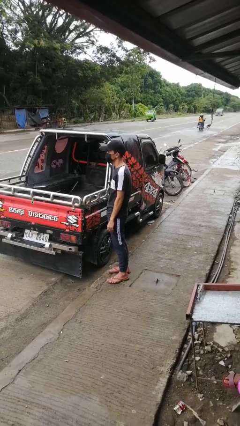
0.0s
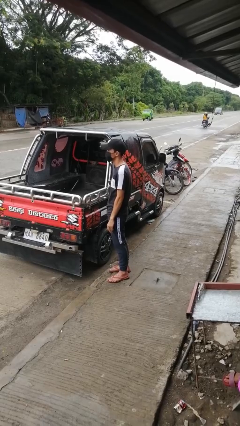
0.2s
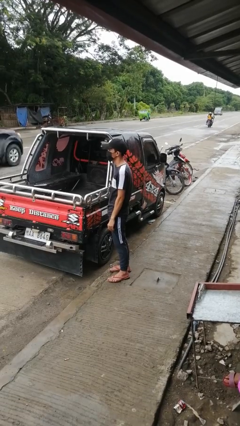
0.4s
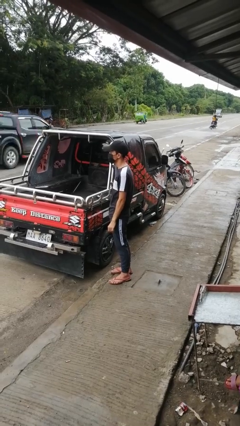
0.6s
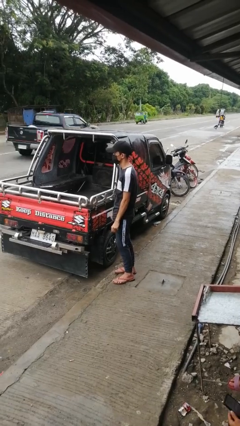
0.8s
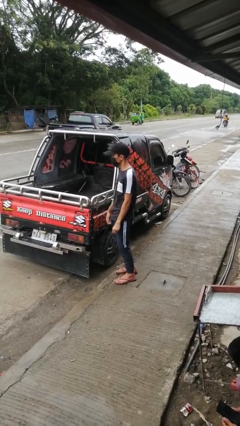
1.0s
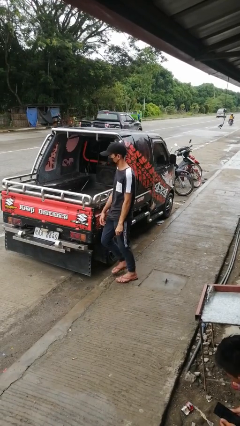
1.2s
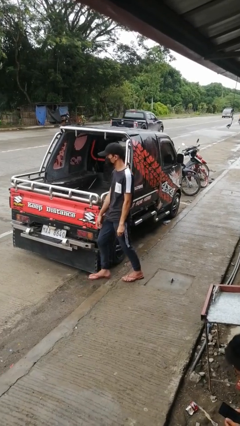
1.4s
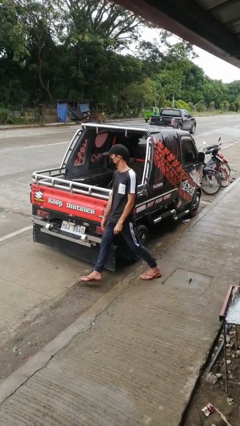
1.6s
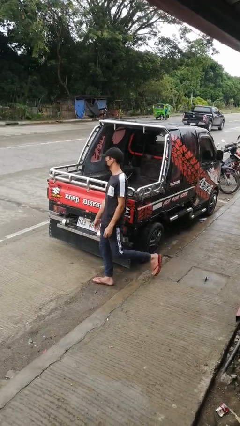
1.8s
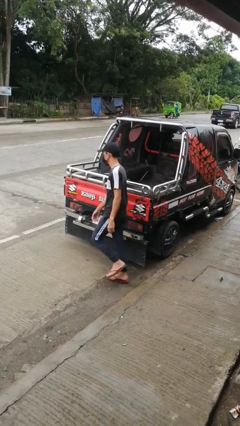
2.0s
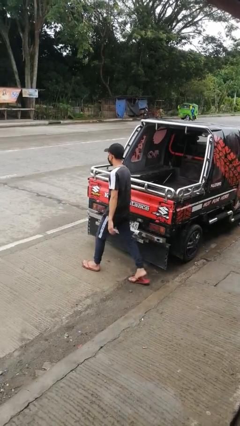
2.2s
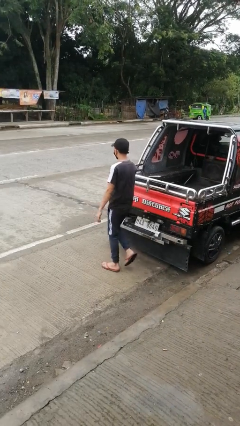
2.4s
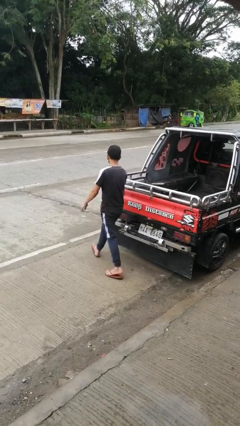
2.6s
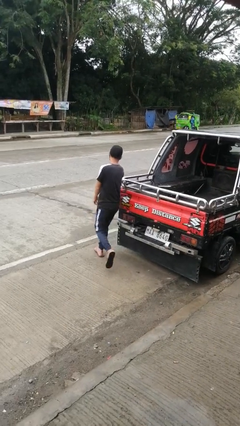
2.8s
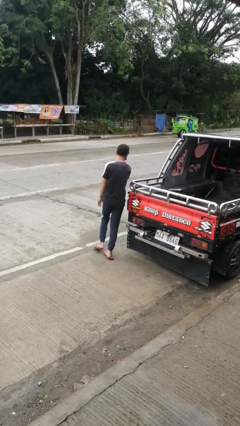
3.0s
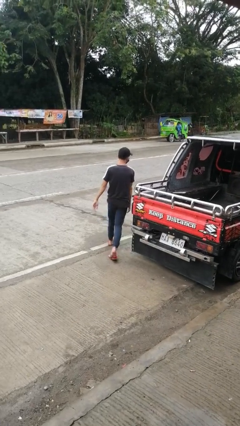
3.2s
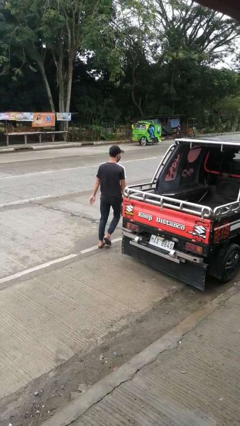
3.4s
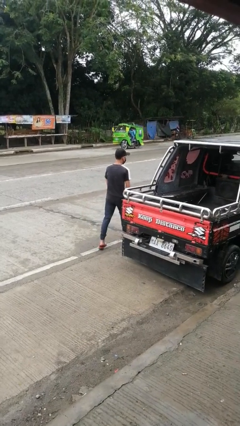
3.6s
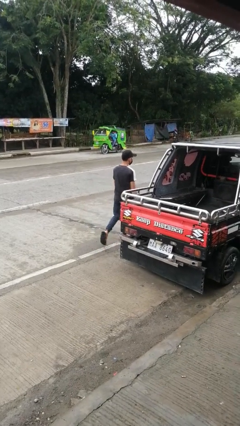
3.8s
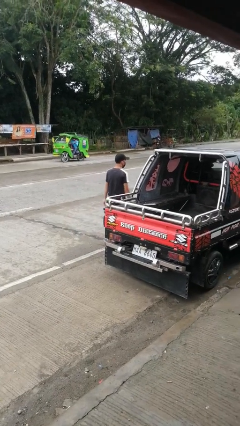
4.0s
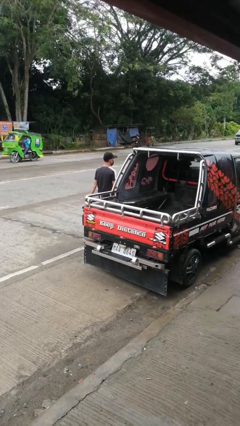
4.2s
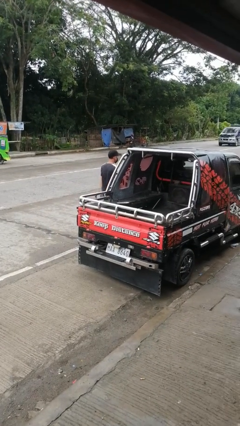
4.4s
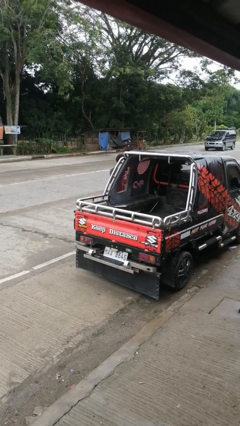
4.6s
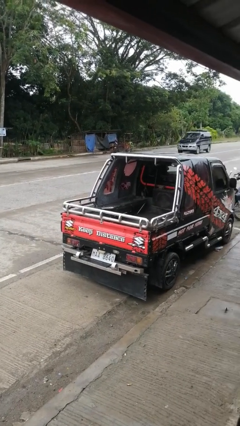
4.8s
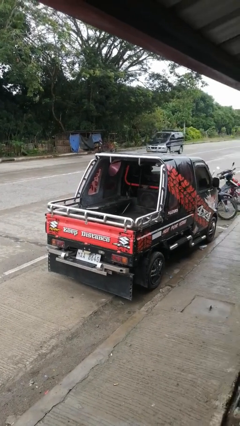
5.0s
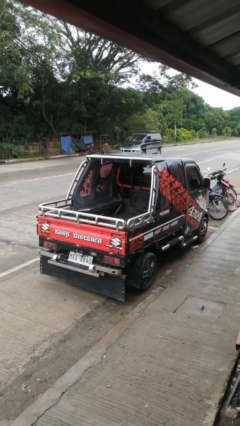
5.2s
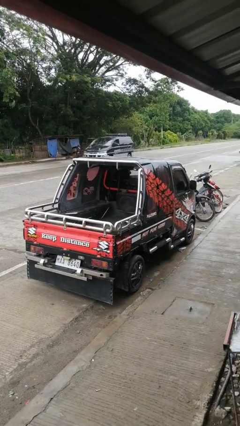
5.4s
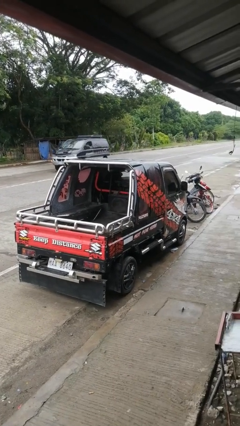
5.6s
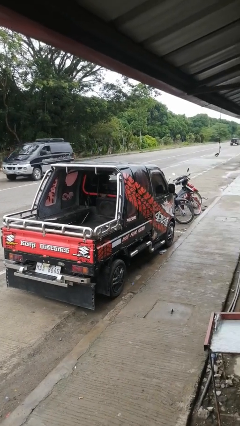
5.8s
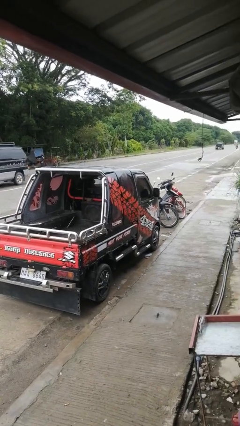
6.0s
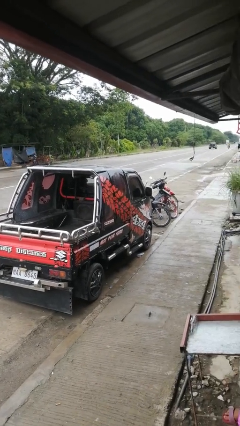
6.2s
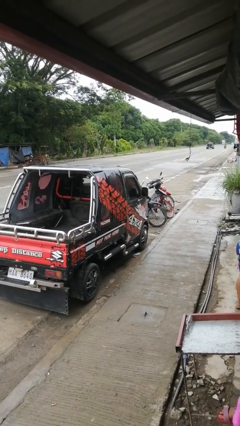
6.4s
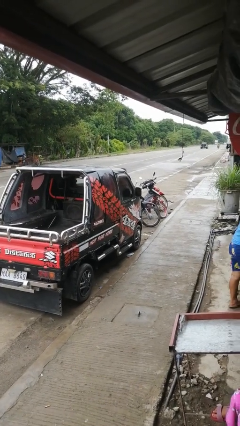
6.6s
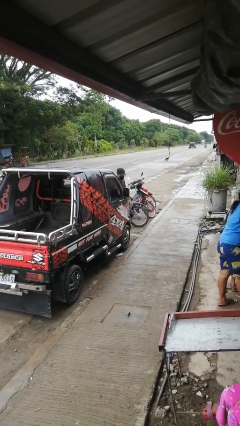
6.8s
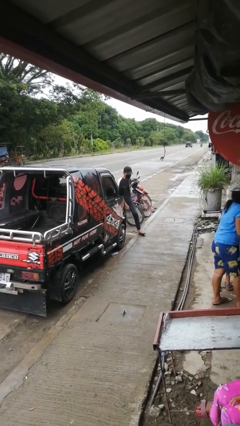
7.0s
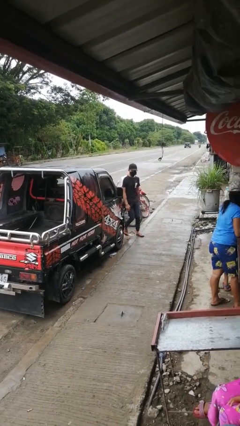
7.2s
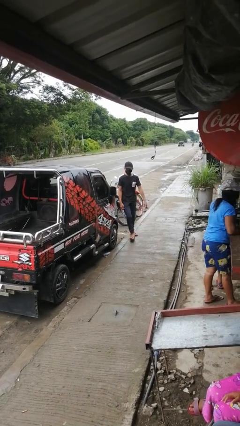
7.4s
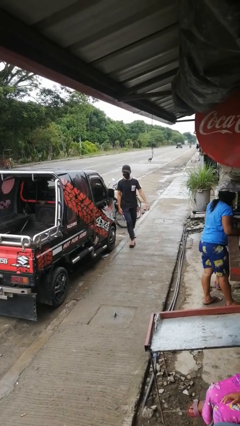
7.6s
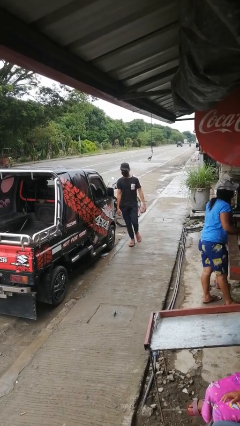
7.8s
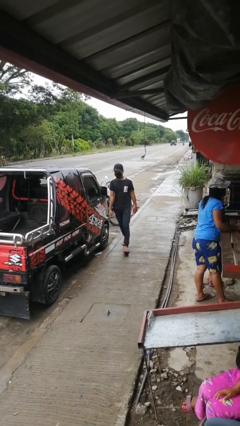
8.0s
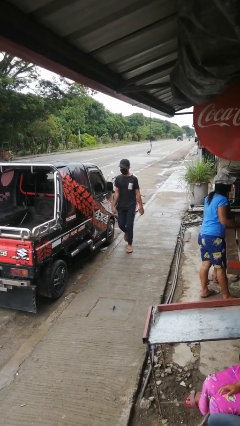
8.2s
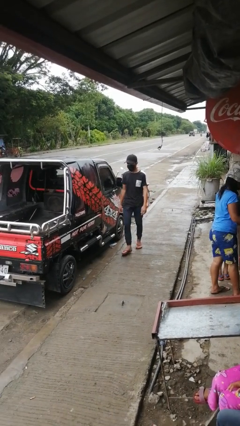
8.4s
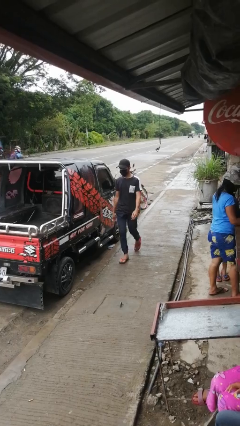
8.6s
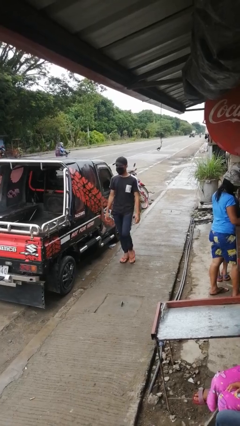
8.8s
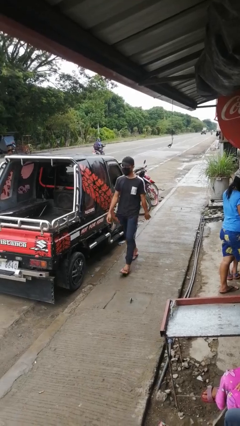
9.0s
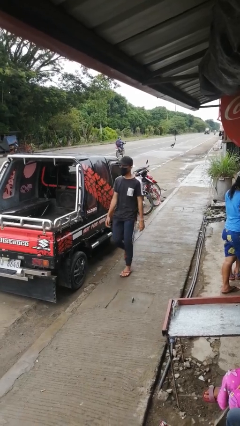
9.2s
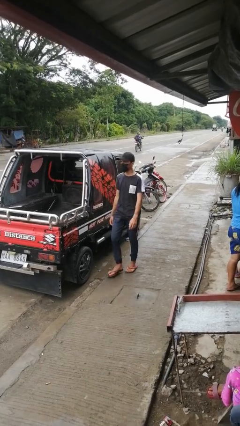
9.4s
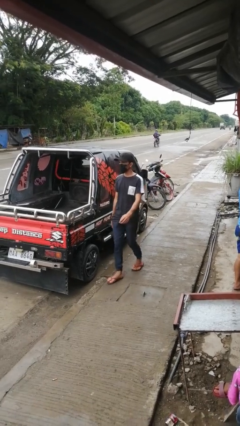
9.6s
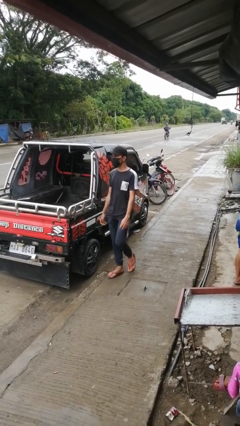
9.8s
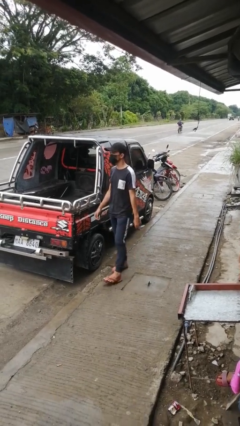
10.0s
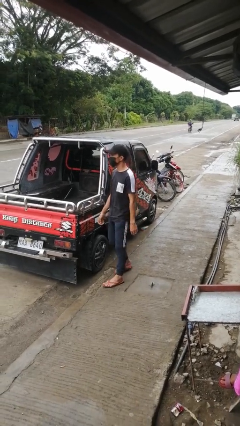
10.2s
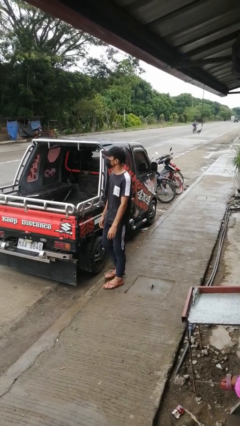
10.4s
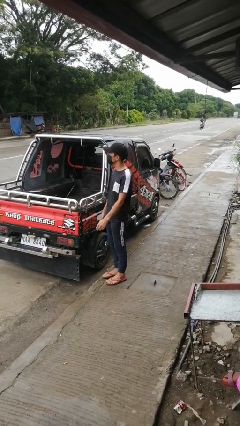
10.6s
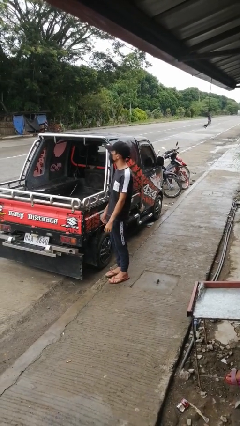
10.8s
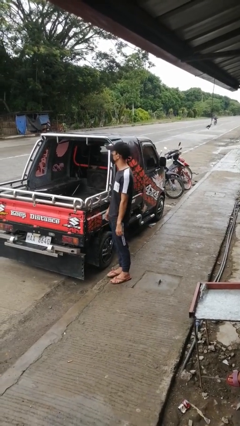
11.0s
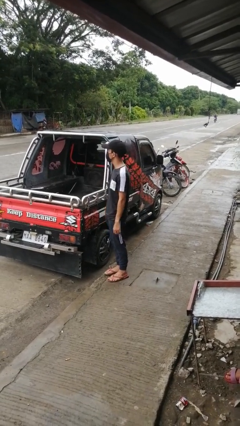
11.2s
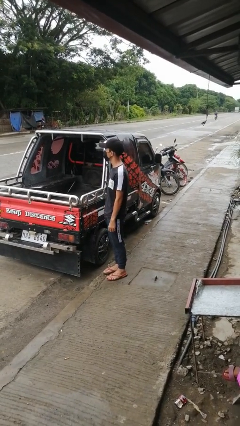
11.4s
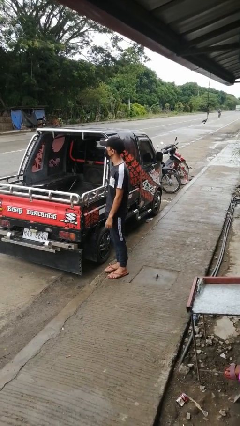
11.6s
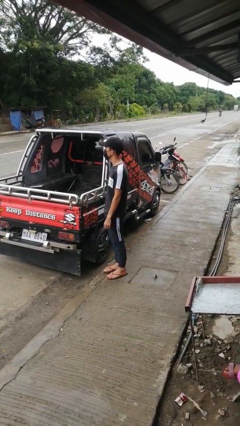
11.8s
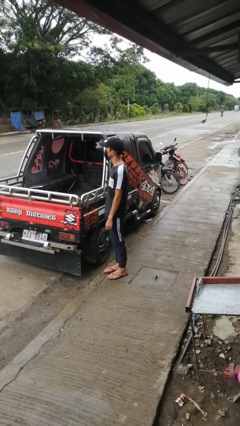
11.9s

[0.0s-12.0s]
person walks around car

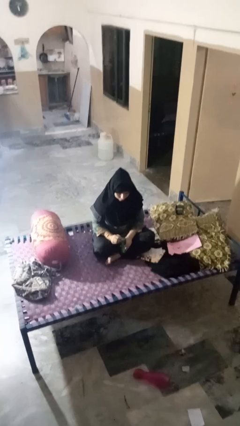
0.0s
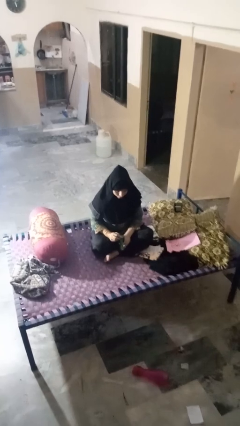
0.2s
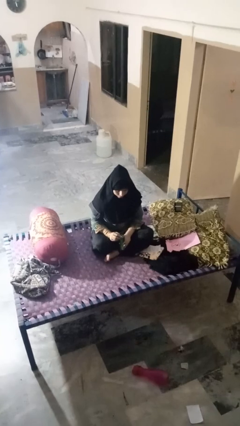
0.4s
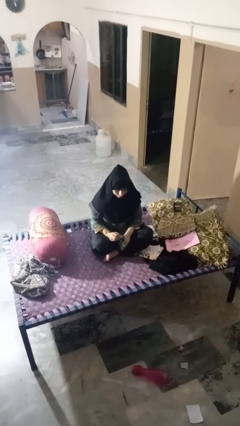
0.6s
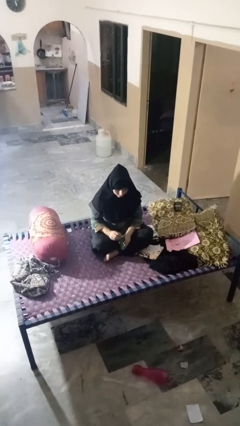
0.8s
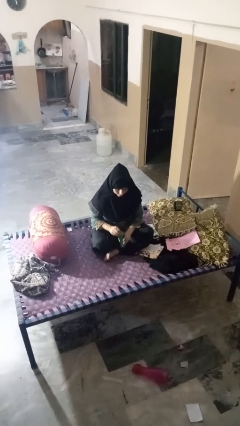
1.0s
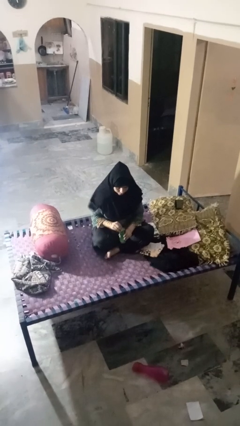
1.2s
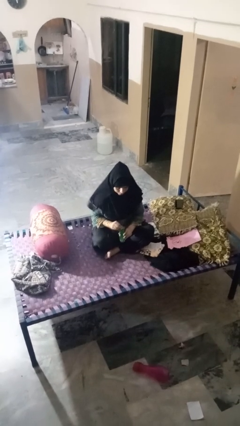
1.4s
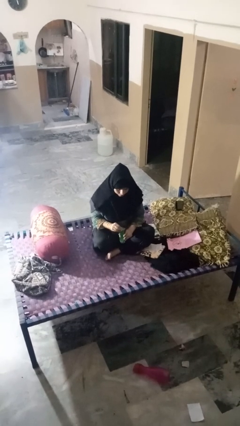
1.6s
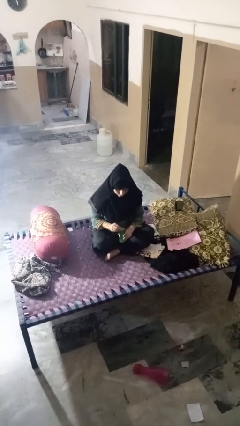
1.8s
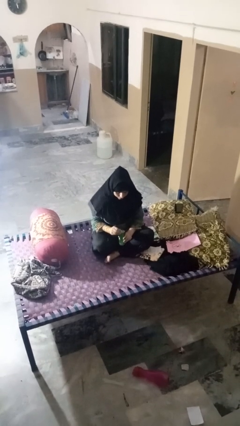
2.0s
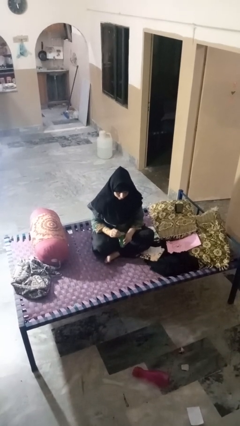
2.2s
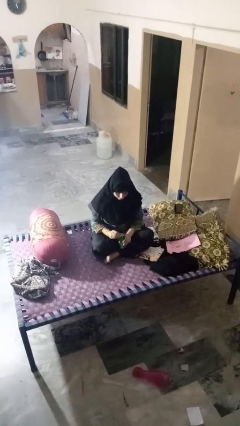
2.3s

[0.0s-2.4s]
person opens can with can opener

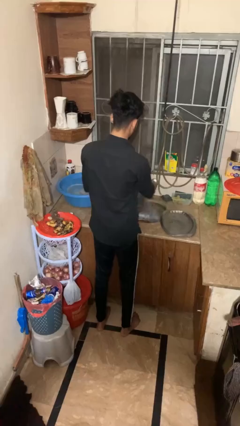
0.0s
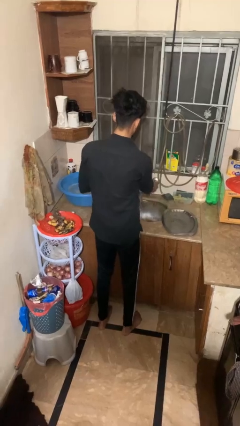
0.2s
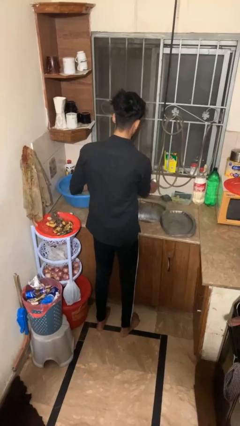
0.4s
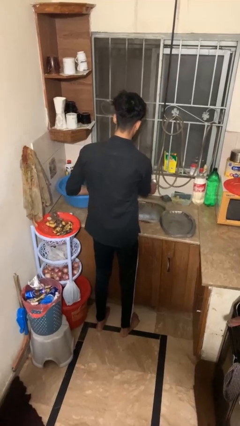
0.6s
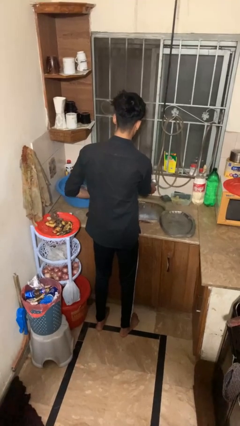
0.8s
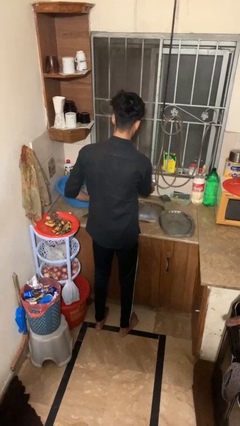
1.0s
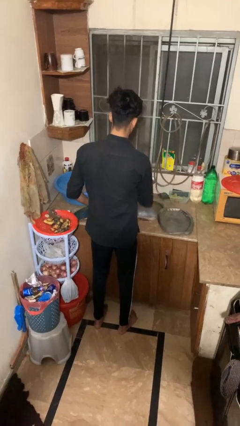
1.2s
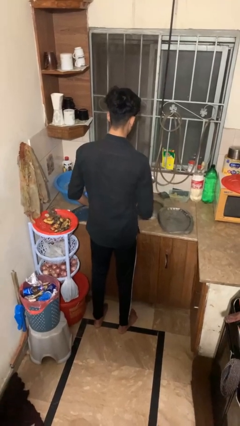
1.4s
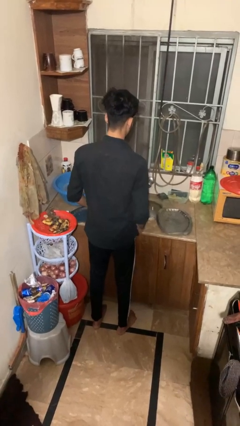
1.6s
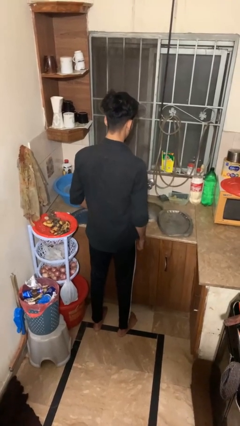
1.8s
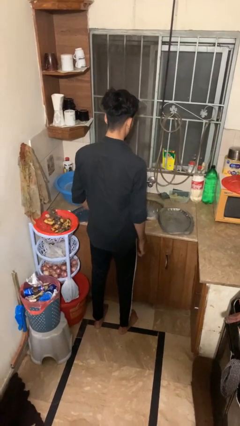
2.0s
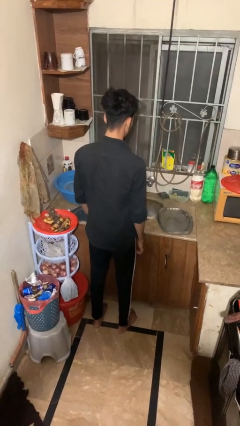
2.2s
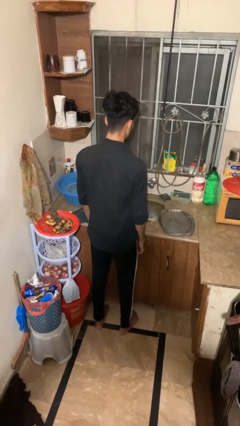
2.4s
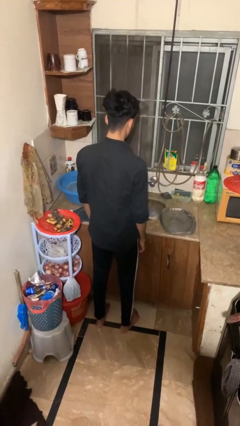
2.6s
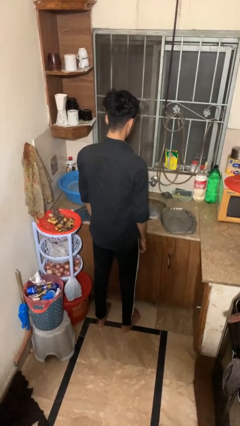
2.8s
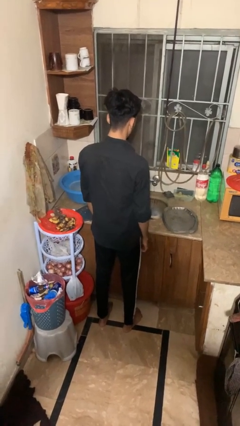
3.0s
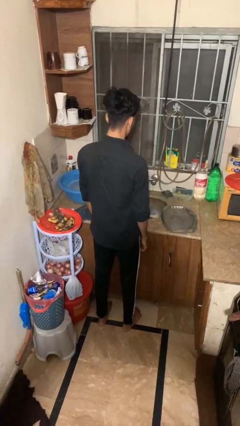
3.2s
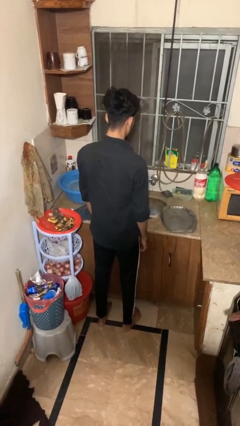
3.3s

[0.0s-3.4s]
person closes dishwasher
